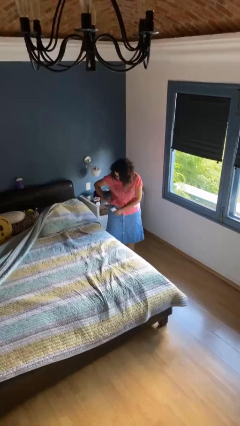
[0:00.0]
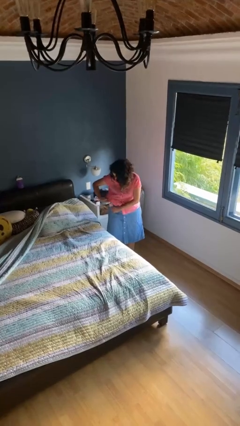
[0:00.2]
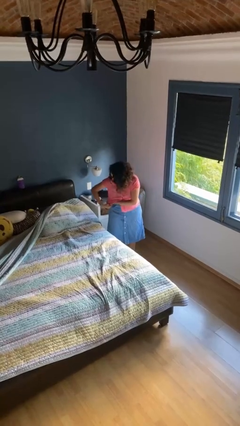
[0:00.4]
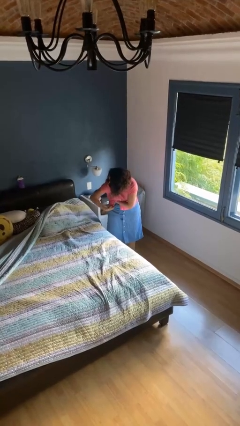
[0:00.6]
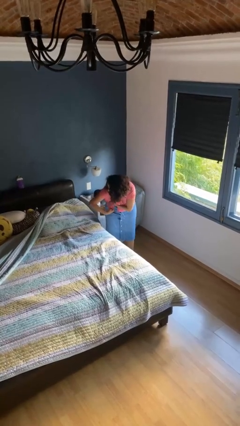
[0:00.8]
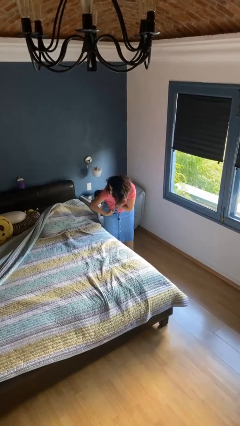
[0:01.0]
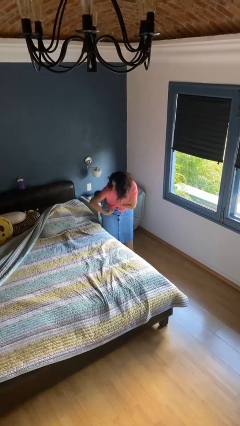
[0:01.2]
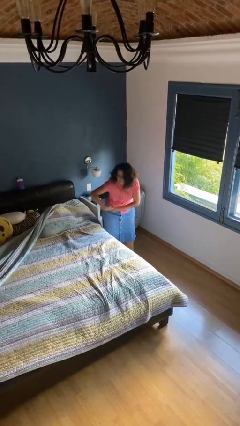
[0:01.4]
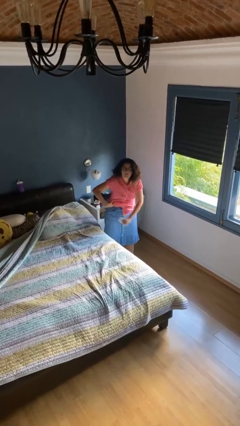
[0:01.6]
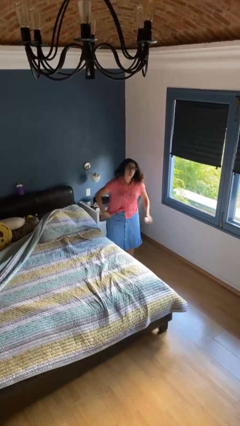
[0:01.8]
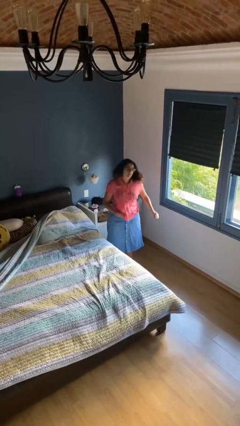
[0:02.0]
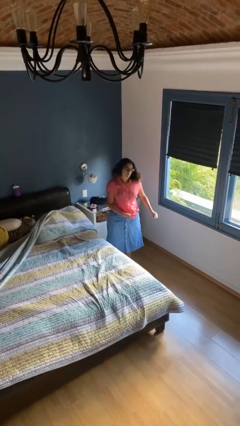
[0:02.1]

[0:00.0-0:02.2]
person applies deodorant

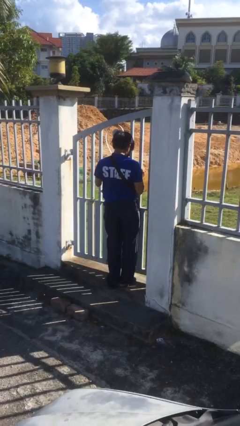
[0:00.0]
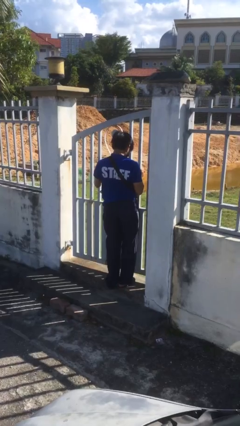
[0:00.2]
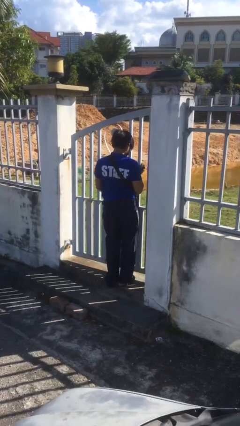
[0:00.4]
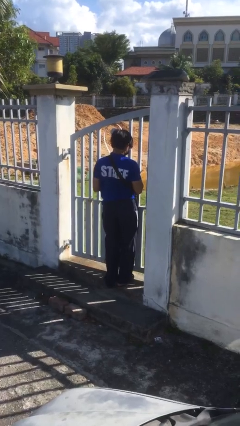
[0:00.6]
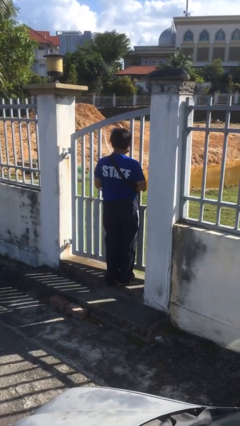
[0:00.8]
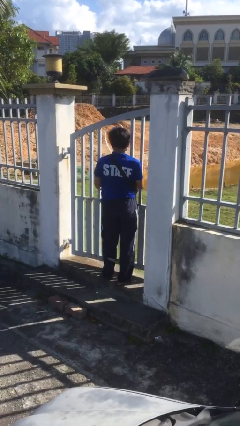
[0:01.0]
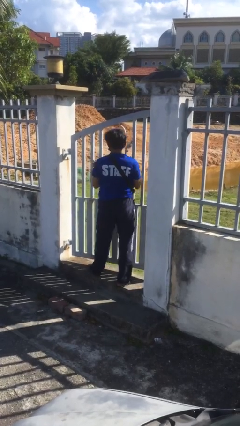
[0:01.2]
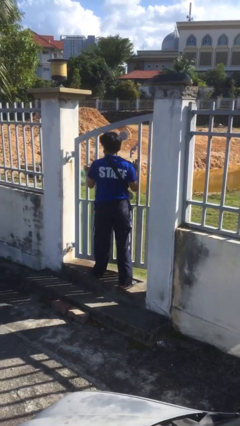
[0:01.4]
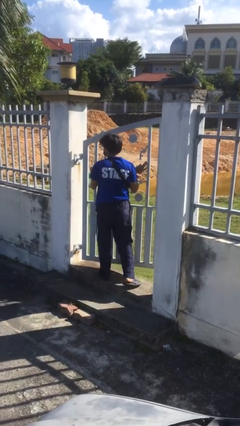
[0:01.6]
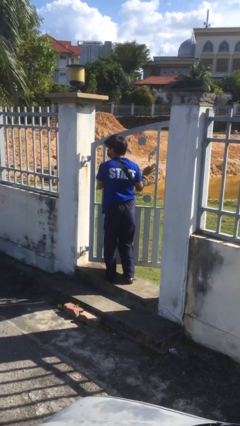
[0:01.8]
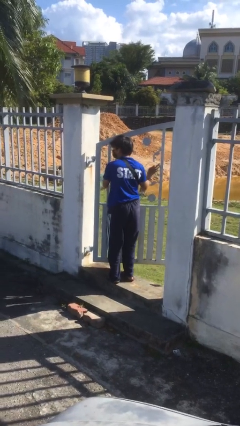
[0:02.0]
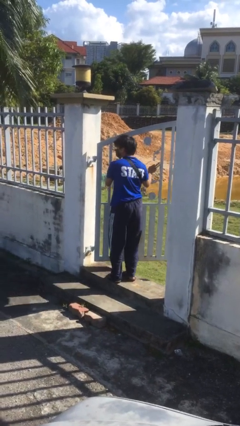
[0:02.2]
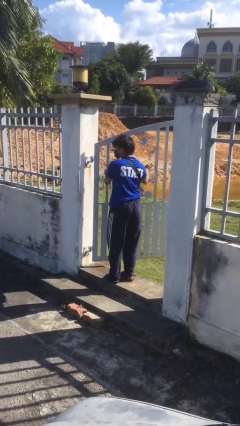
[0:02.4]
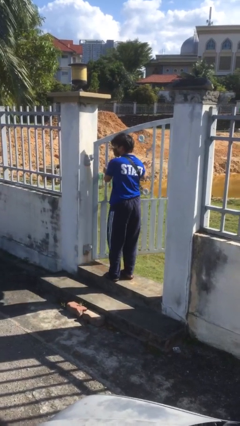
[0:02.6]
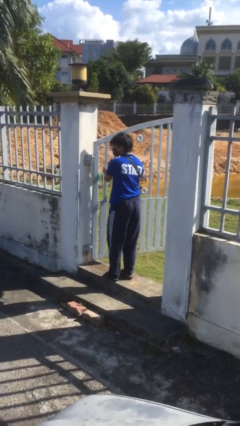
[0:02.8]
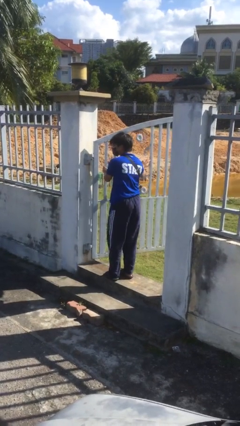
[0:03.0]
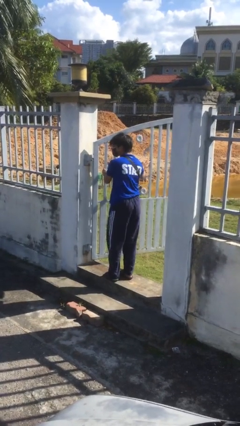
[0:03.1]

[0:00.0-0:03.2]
person opens facility door

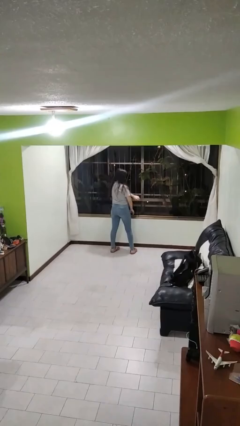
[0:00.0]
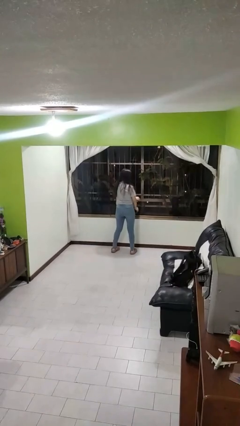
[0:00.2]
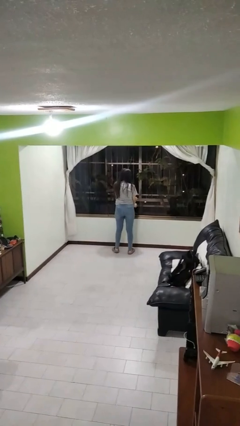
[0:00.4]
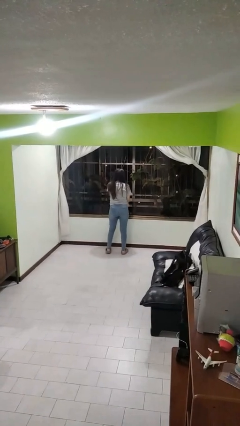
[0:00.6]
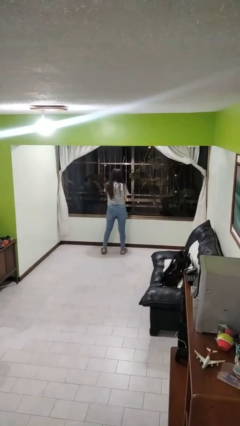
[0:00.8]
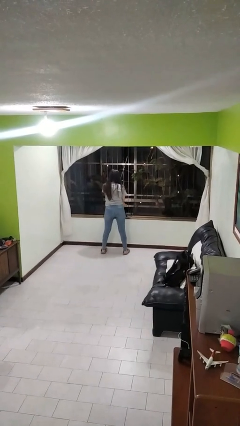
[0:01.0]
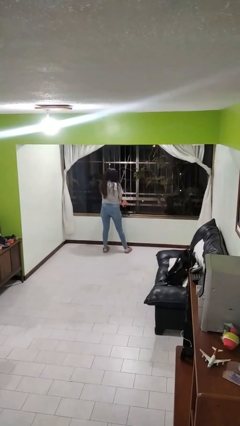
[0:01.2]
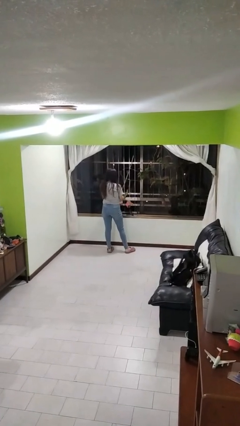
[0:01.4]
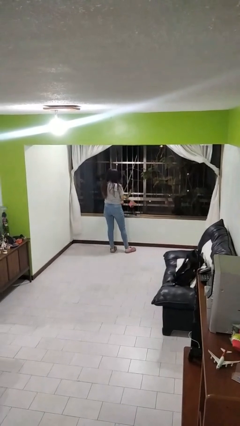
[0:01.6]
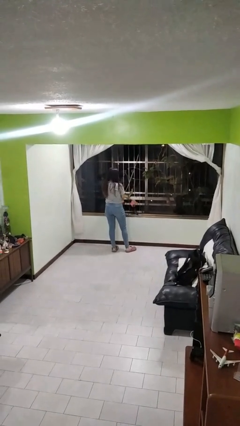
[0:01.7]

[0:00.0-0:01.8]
person opens home window

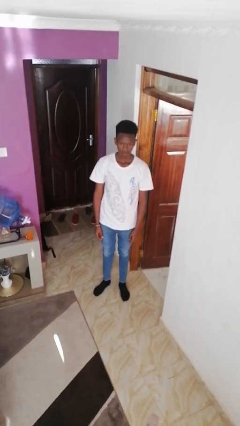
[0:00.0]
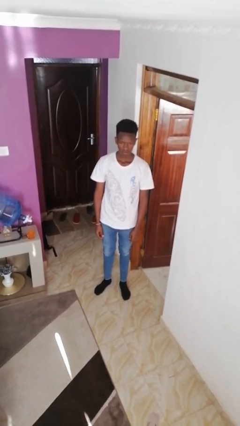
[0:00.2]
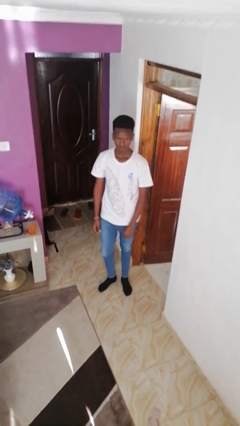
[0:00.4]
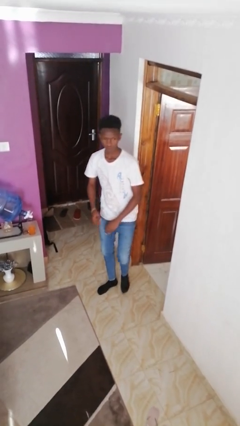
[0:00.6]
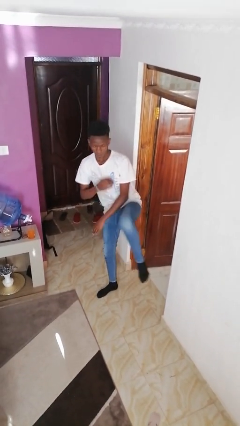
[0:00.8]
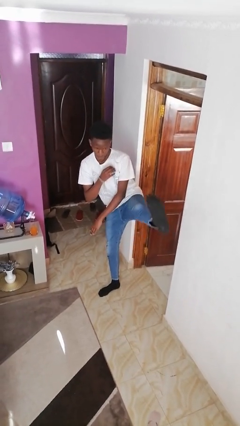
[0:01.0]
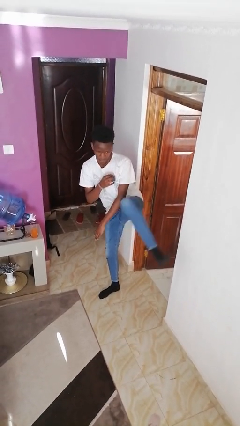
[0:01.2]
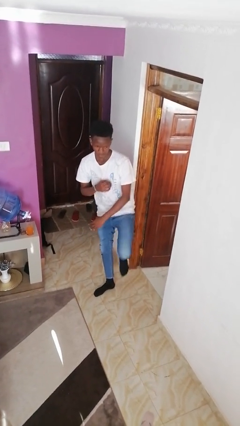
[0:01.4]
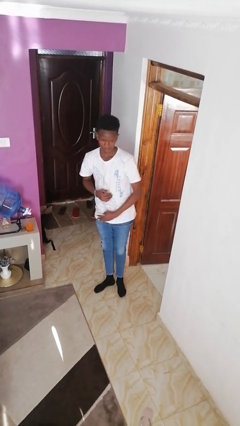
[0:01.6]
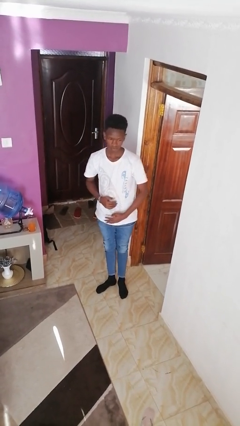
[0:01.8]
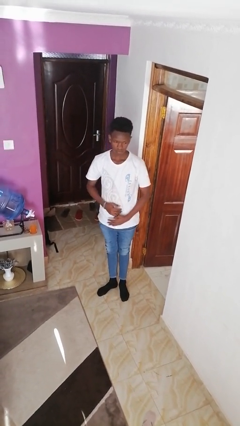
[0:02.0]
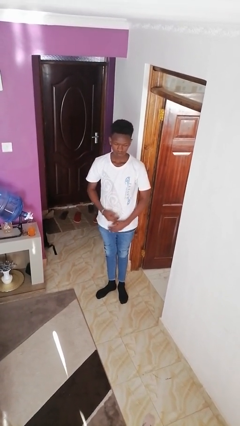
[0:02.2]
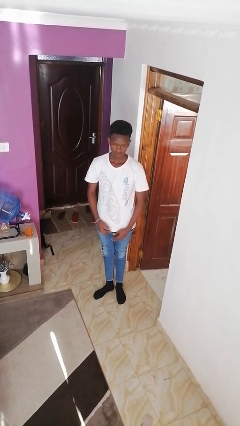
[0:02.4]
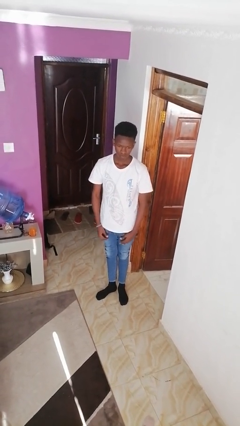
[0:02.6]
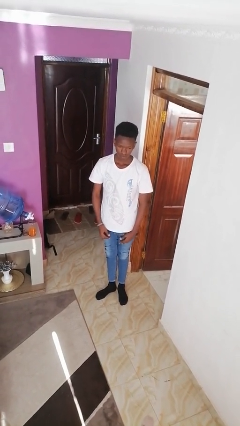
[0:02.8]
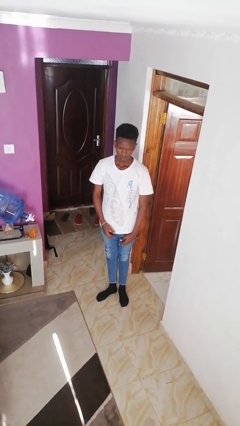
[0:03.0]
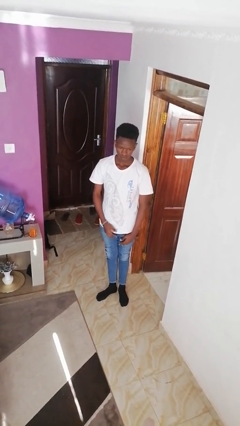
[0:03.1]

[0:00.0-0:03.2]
person karate kicks

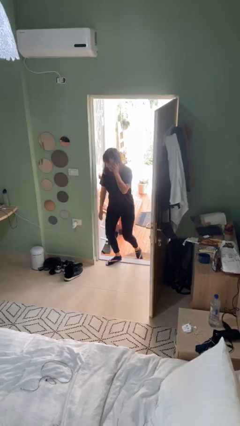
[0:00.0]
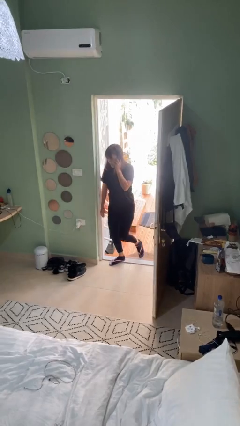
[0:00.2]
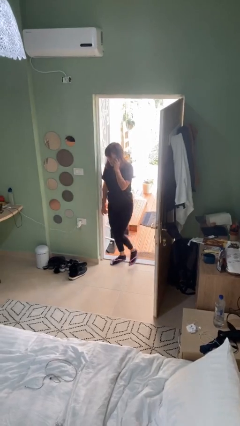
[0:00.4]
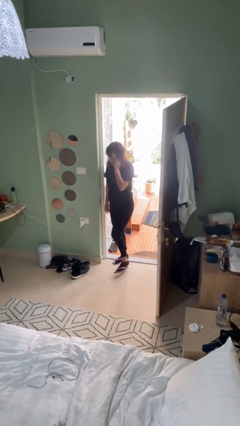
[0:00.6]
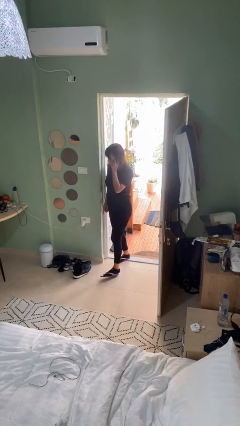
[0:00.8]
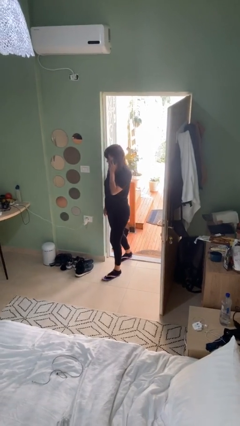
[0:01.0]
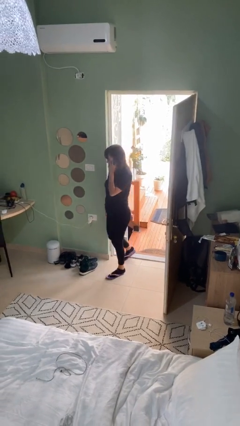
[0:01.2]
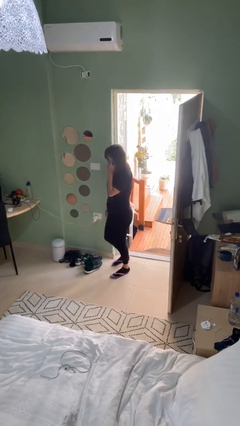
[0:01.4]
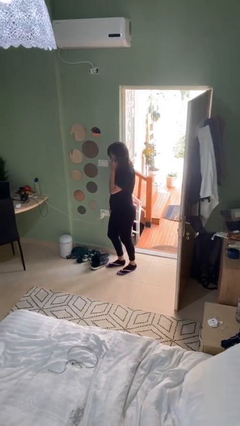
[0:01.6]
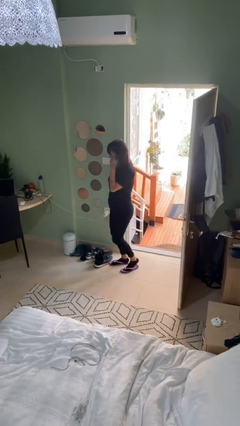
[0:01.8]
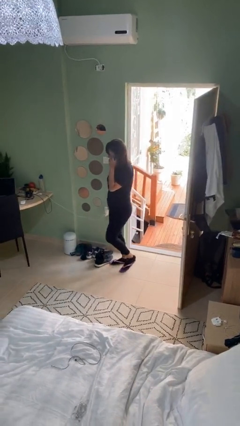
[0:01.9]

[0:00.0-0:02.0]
person enters scene through structure

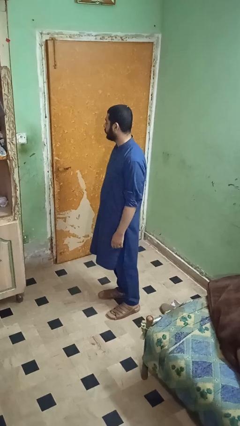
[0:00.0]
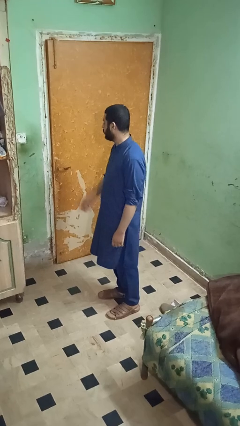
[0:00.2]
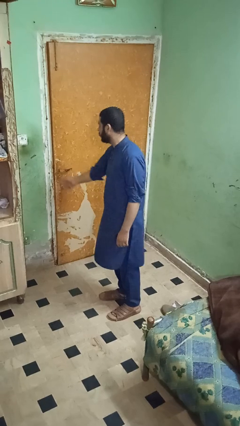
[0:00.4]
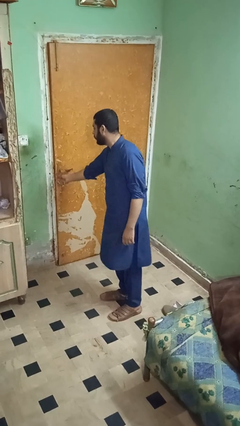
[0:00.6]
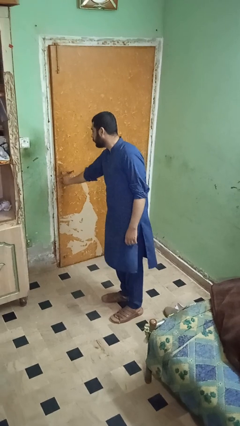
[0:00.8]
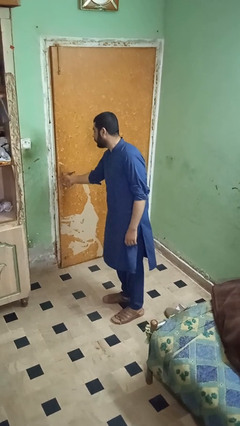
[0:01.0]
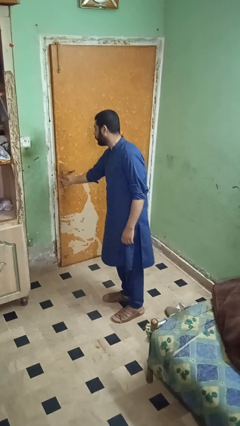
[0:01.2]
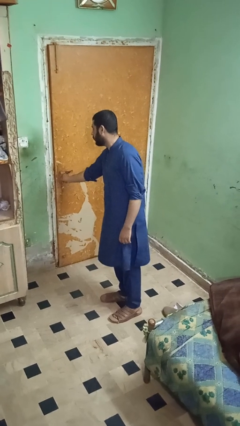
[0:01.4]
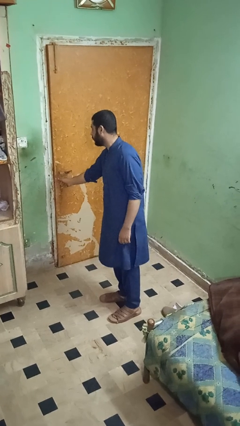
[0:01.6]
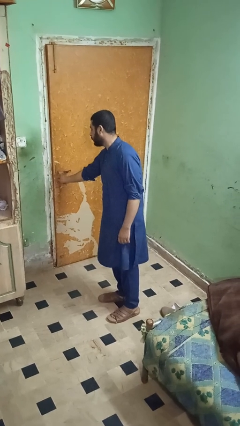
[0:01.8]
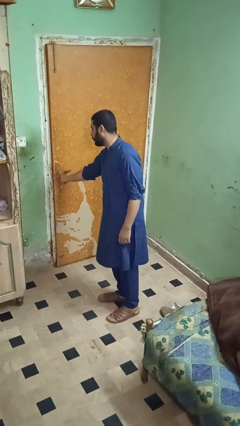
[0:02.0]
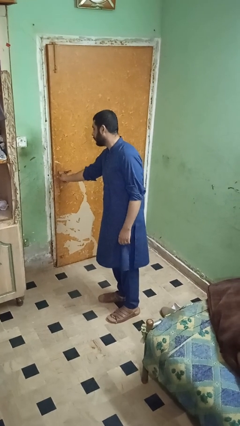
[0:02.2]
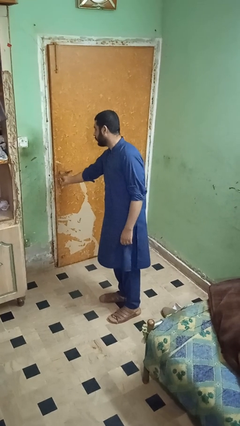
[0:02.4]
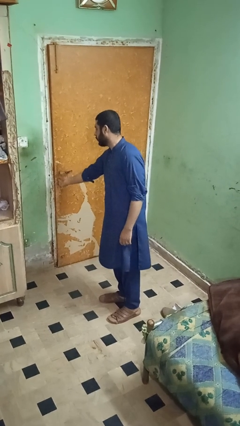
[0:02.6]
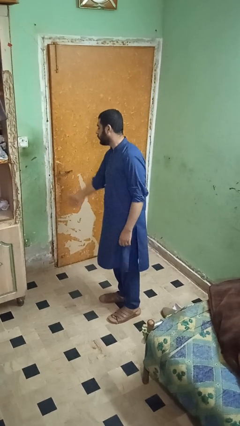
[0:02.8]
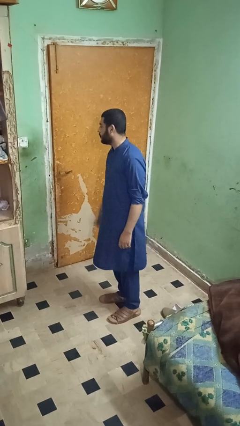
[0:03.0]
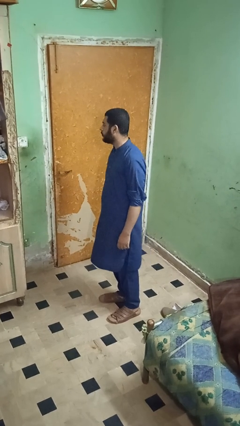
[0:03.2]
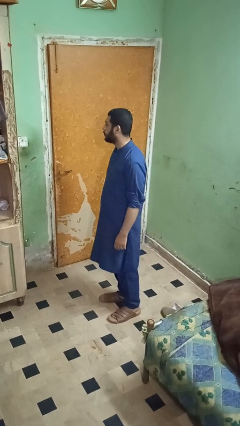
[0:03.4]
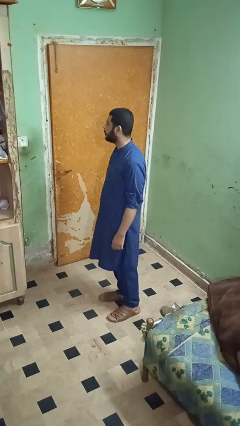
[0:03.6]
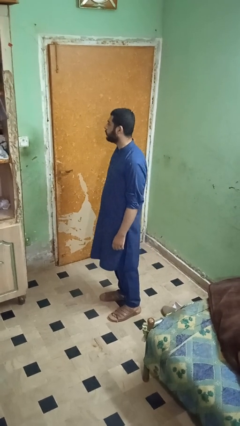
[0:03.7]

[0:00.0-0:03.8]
person locks door with keys

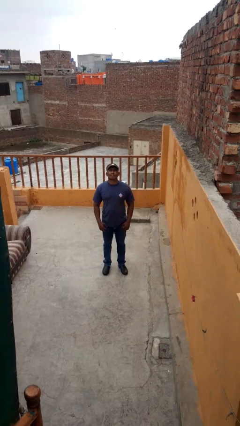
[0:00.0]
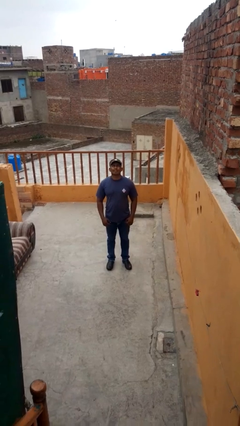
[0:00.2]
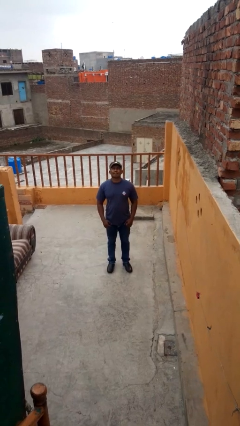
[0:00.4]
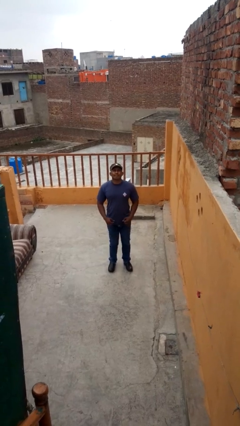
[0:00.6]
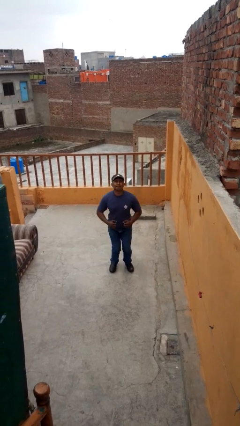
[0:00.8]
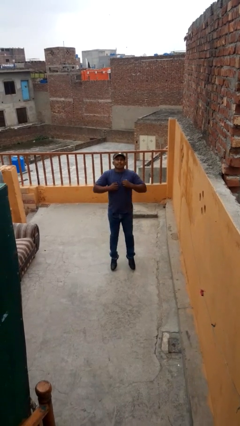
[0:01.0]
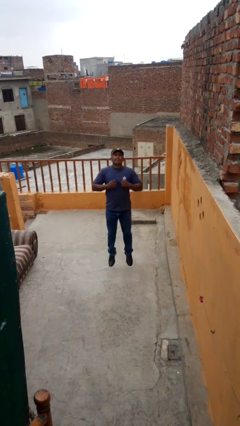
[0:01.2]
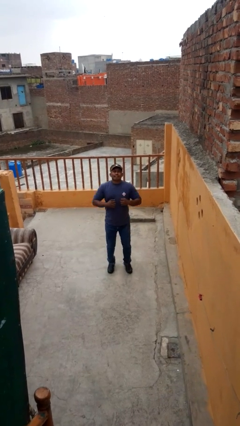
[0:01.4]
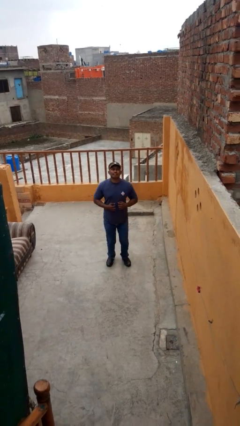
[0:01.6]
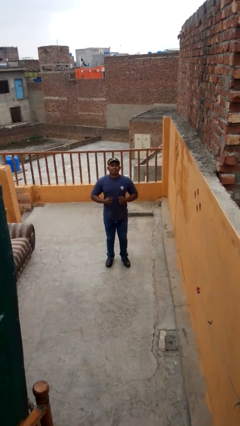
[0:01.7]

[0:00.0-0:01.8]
person jumps
